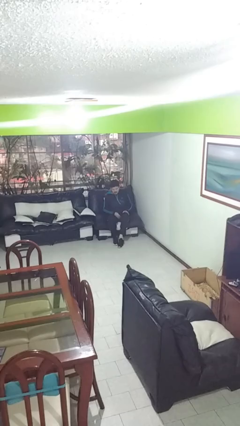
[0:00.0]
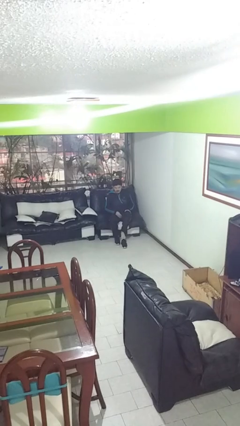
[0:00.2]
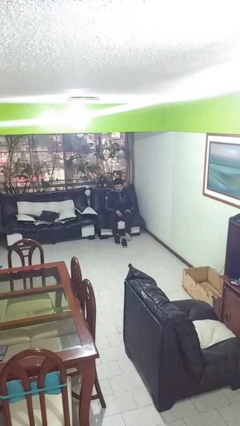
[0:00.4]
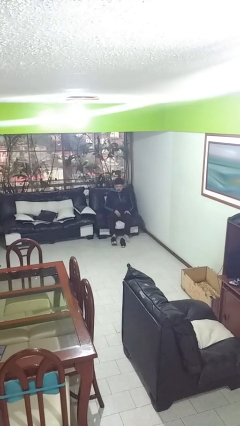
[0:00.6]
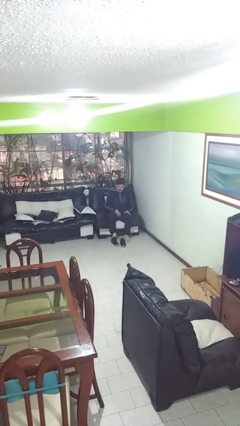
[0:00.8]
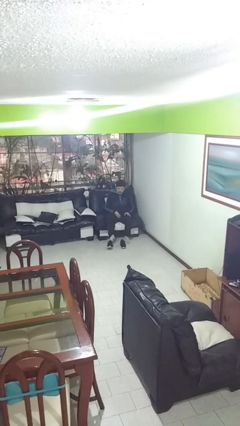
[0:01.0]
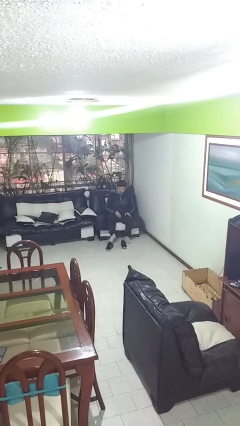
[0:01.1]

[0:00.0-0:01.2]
person takes off shoes

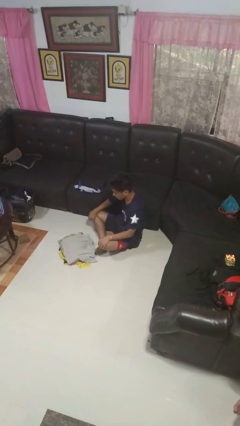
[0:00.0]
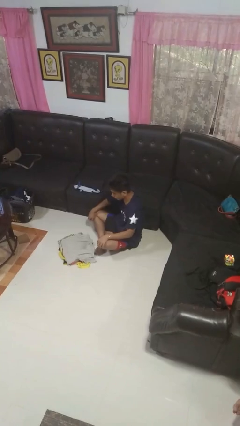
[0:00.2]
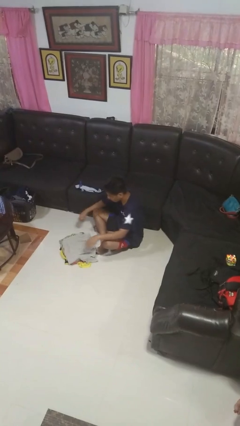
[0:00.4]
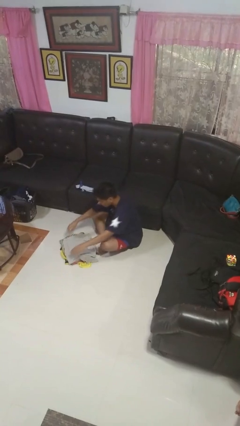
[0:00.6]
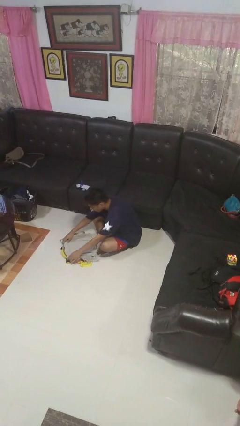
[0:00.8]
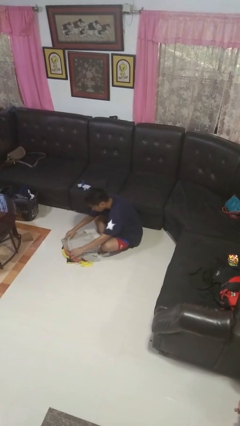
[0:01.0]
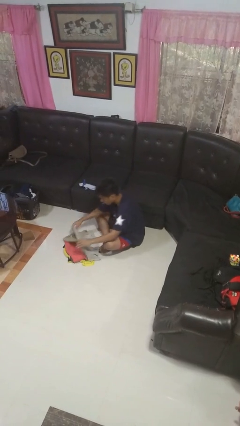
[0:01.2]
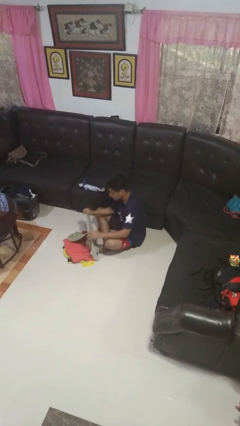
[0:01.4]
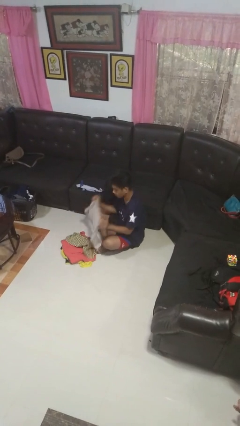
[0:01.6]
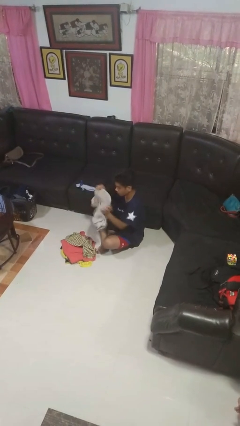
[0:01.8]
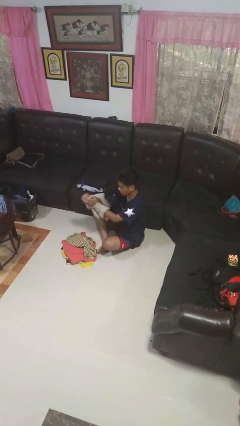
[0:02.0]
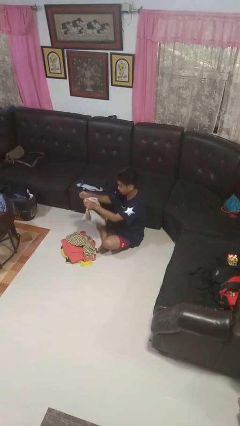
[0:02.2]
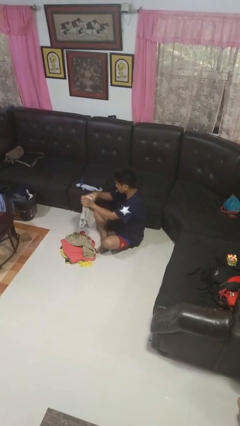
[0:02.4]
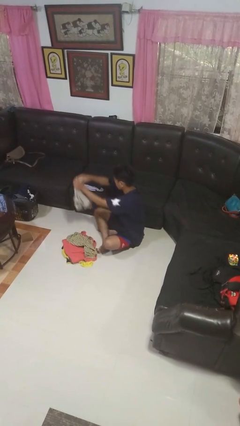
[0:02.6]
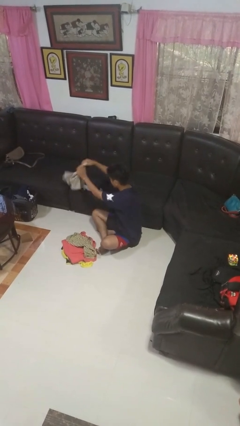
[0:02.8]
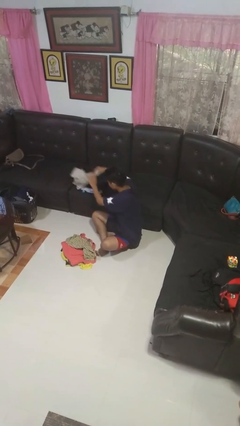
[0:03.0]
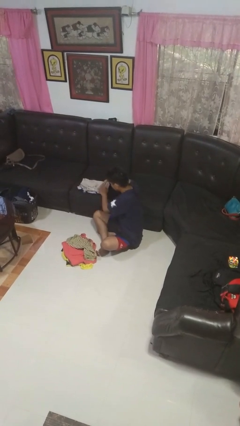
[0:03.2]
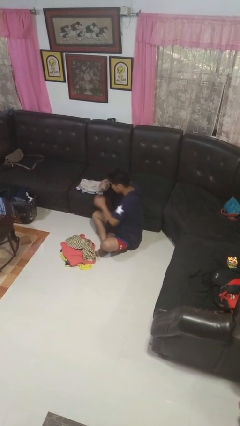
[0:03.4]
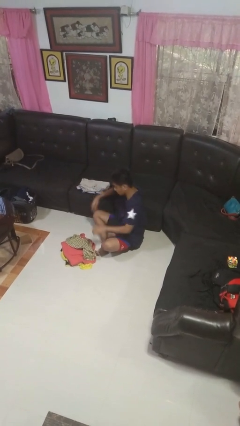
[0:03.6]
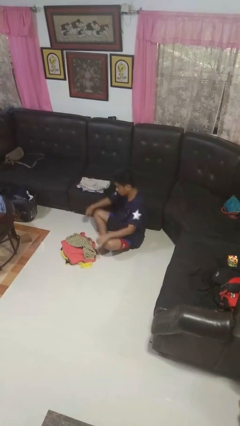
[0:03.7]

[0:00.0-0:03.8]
person folds shirt

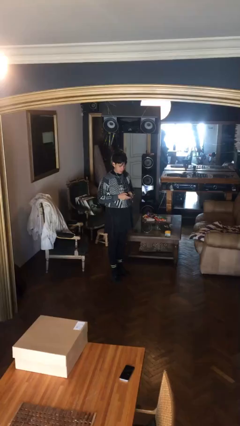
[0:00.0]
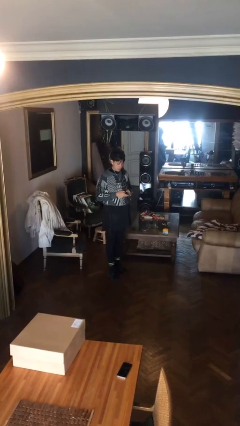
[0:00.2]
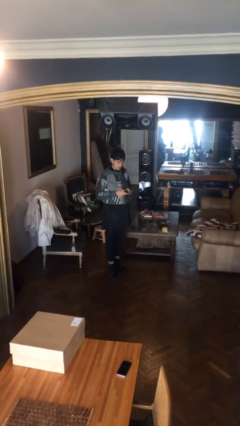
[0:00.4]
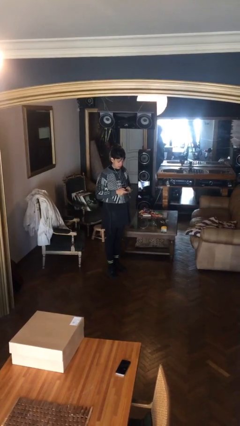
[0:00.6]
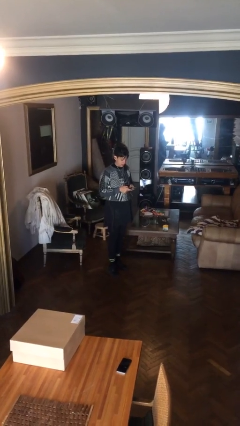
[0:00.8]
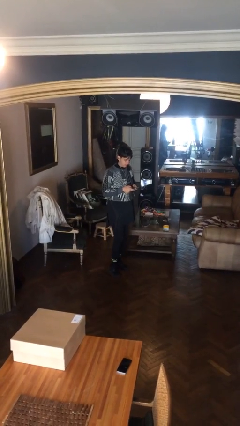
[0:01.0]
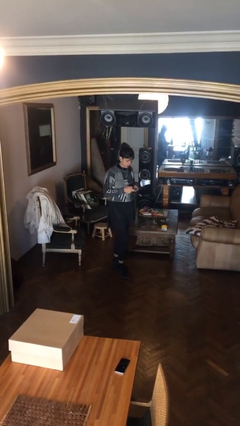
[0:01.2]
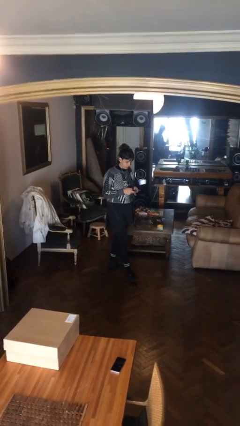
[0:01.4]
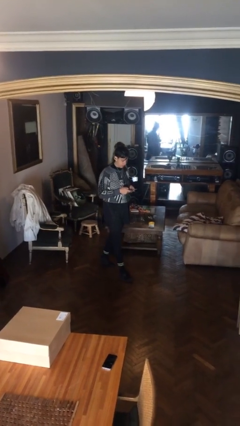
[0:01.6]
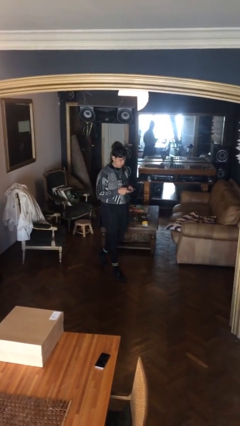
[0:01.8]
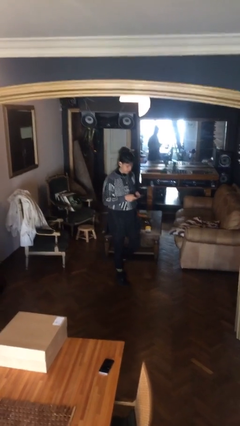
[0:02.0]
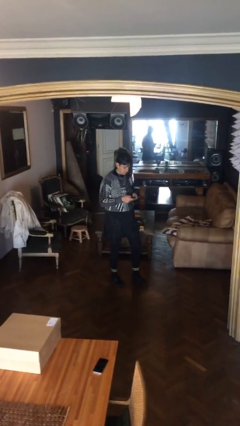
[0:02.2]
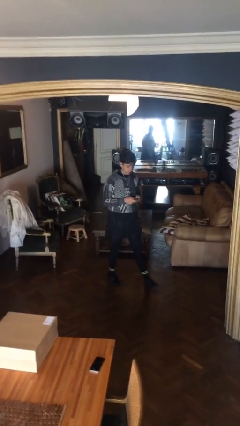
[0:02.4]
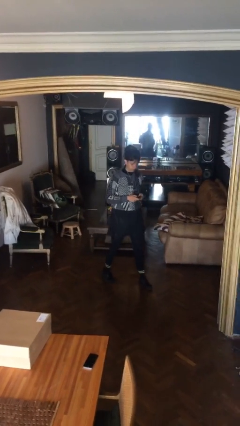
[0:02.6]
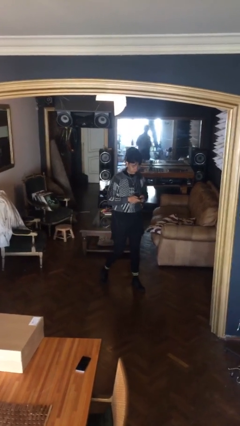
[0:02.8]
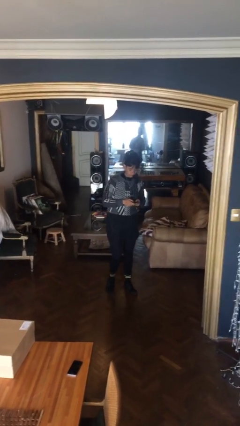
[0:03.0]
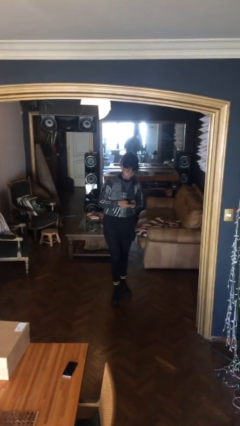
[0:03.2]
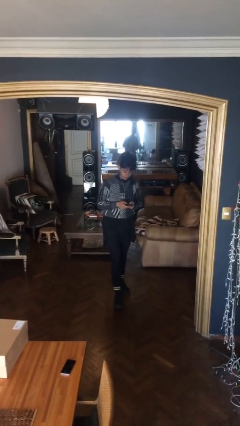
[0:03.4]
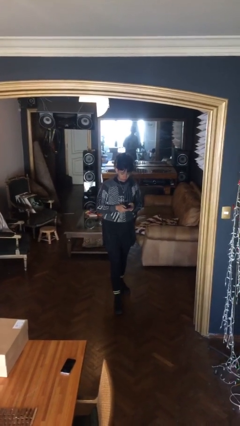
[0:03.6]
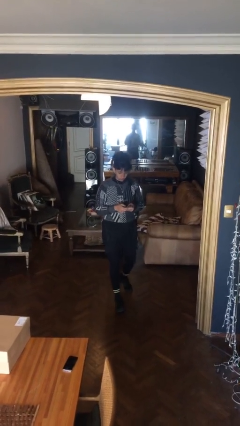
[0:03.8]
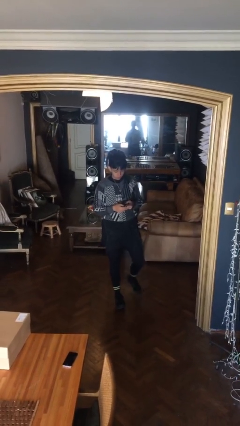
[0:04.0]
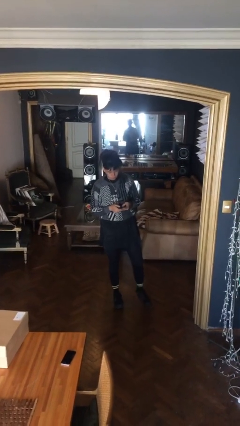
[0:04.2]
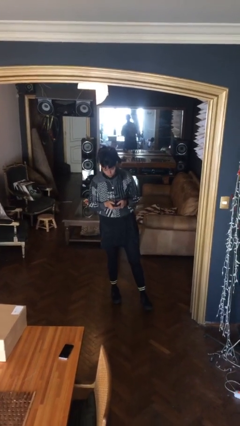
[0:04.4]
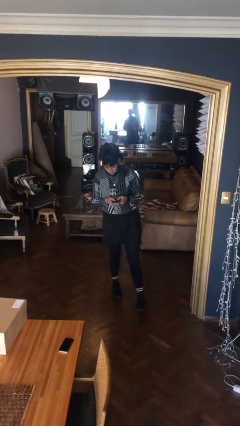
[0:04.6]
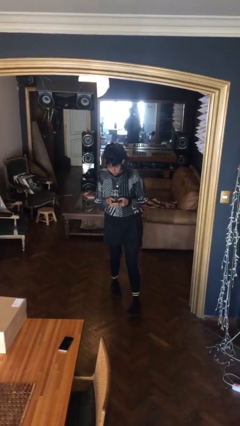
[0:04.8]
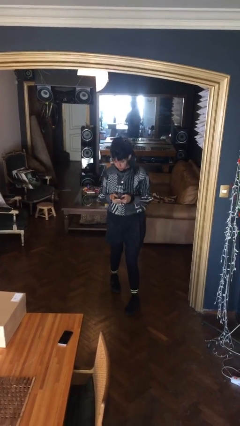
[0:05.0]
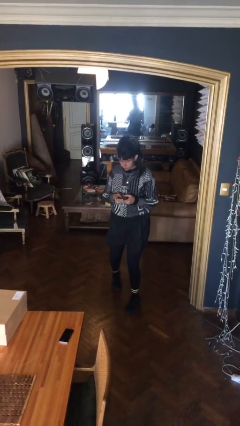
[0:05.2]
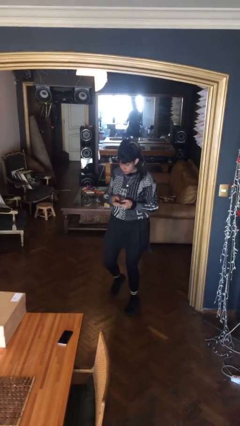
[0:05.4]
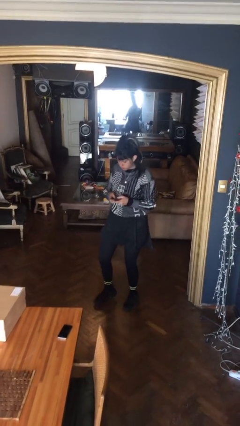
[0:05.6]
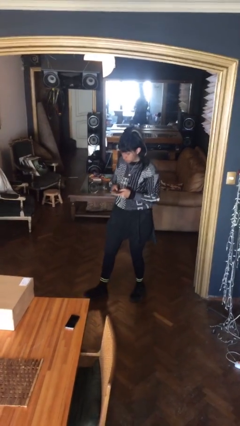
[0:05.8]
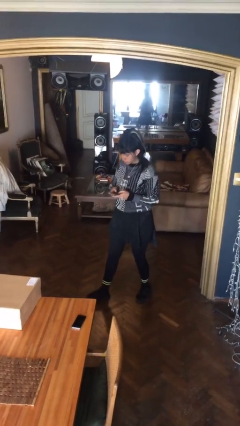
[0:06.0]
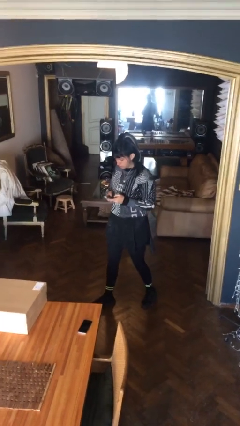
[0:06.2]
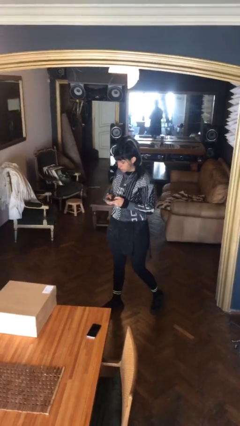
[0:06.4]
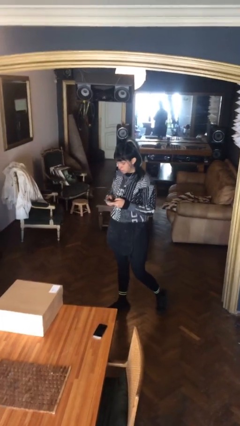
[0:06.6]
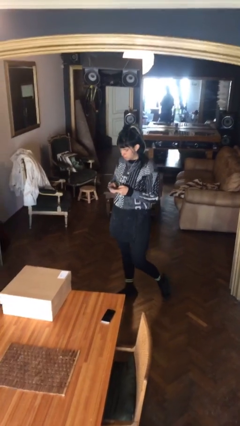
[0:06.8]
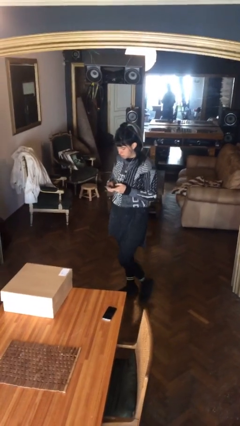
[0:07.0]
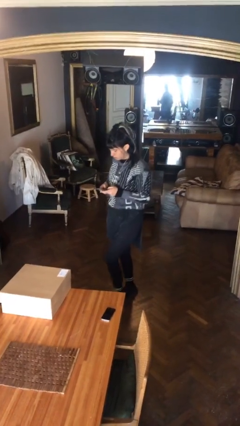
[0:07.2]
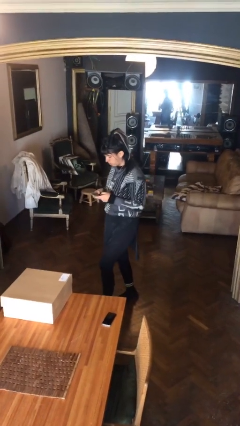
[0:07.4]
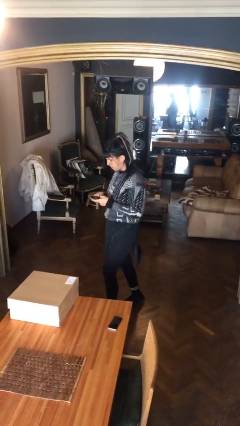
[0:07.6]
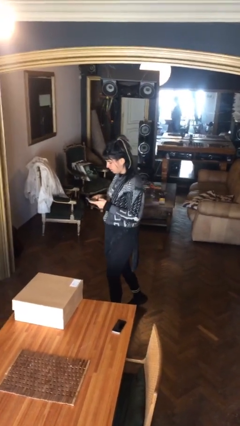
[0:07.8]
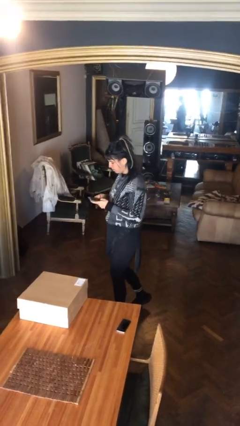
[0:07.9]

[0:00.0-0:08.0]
person texts on phone

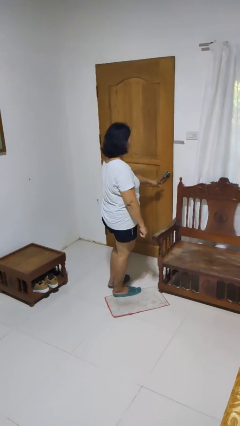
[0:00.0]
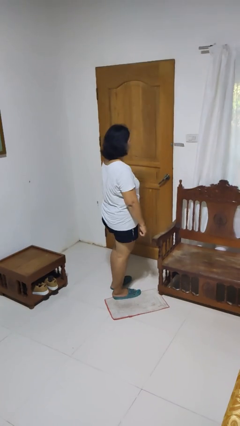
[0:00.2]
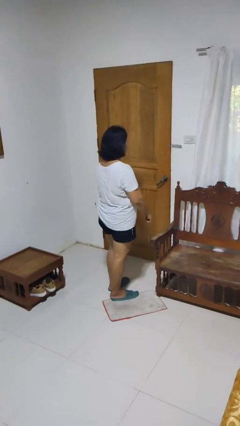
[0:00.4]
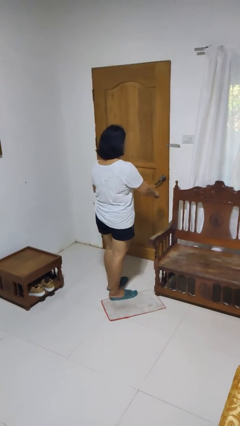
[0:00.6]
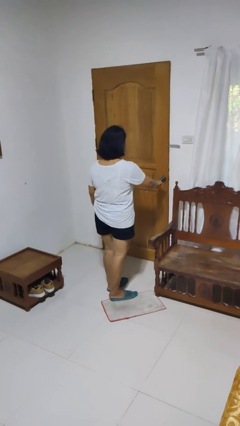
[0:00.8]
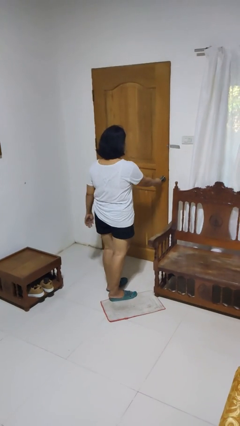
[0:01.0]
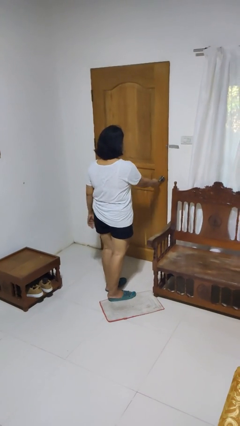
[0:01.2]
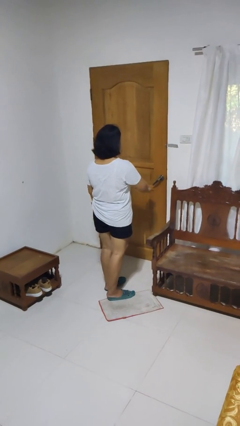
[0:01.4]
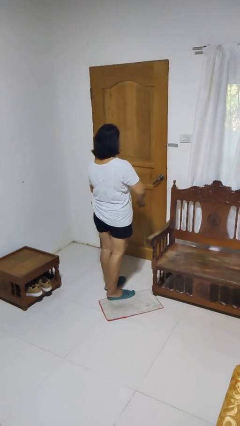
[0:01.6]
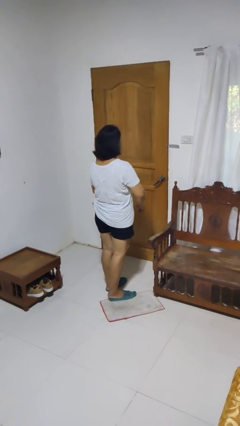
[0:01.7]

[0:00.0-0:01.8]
person locks door with keys

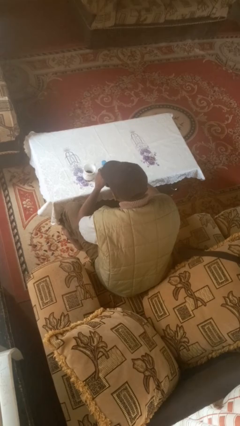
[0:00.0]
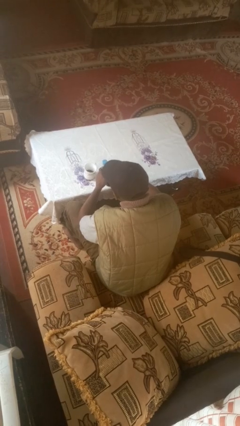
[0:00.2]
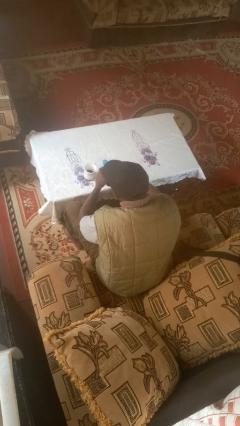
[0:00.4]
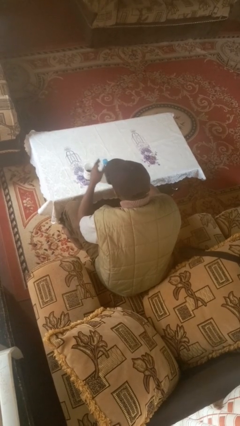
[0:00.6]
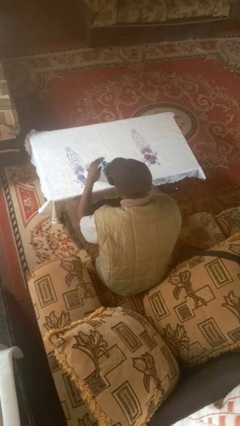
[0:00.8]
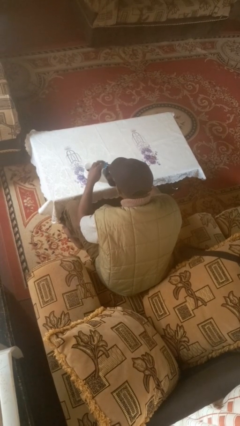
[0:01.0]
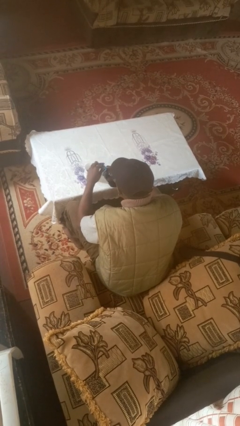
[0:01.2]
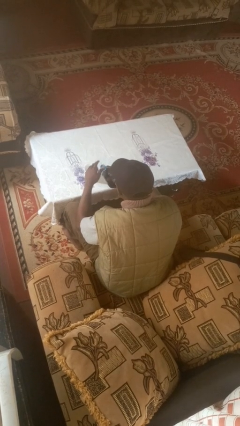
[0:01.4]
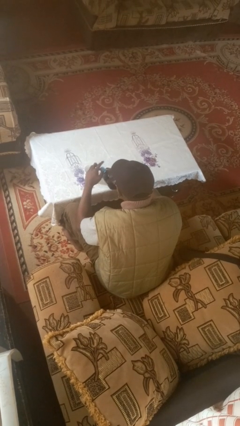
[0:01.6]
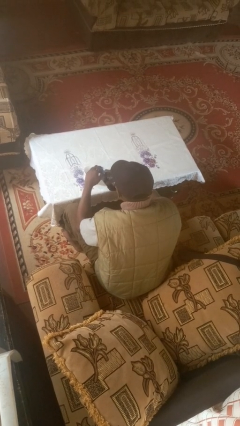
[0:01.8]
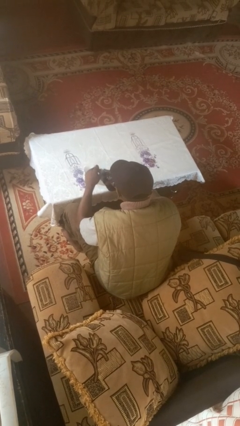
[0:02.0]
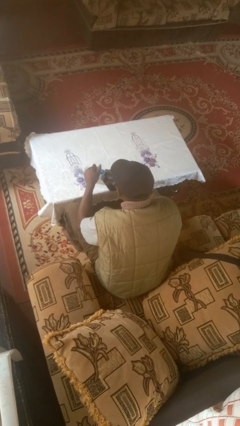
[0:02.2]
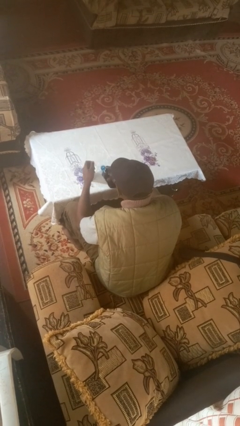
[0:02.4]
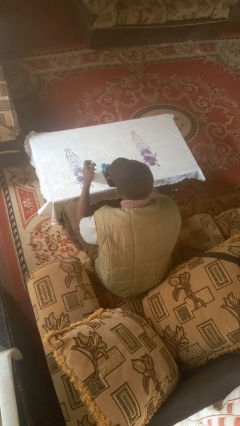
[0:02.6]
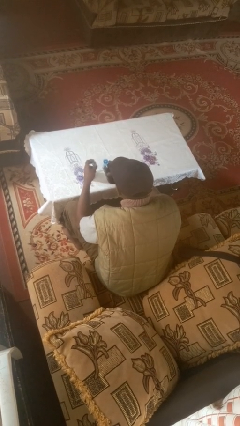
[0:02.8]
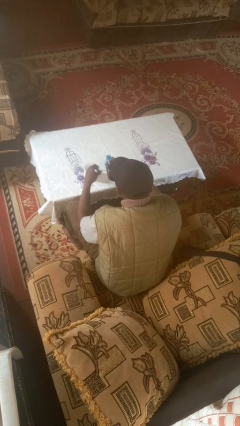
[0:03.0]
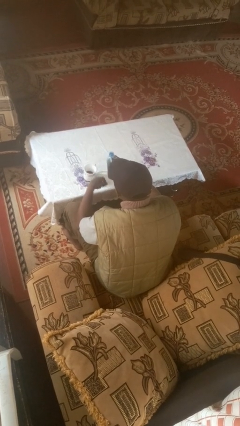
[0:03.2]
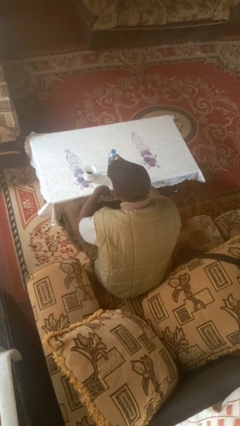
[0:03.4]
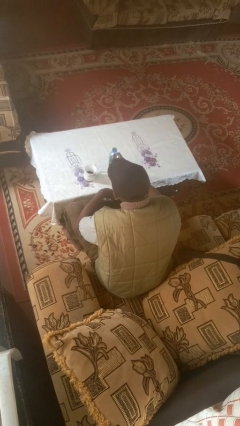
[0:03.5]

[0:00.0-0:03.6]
person unscrews lid from bottle
